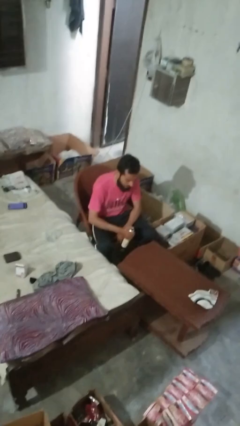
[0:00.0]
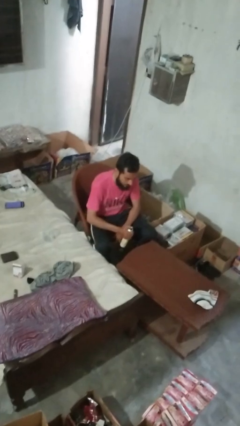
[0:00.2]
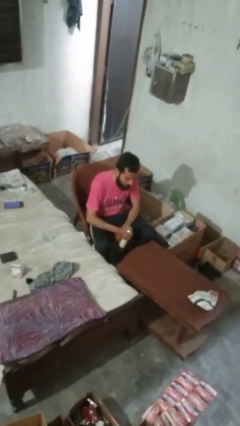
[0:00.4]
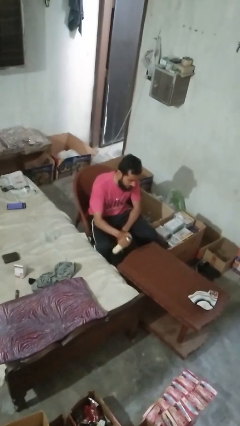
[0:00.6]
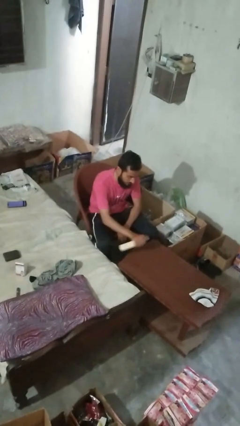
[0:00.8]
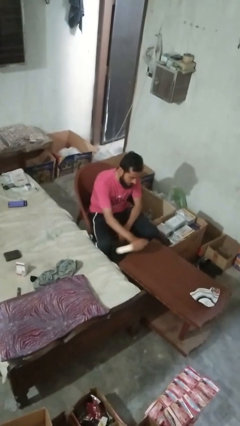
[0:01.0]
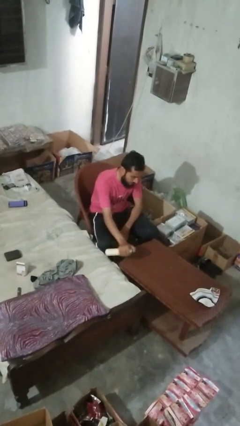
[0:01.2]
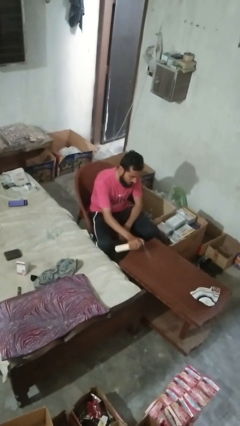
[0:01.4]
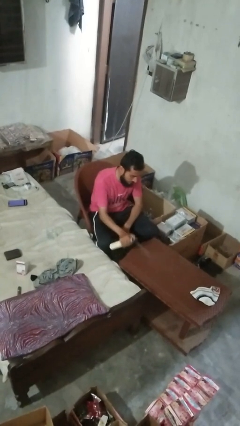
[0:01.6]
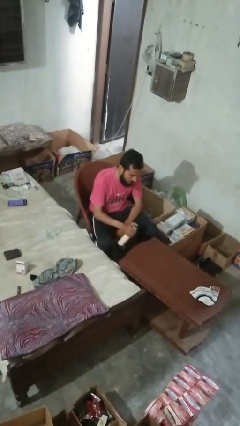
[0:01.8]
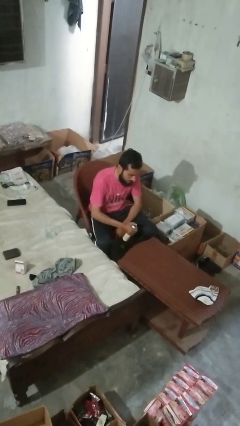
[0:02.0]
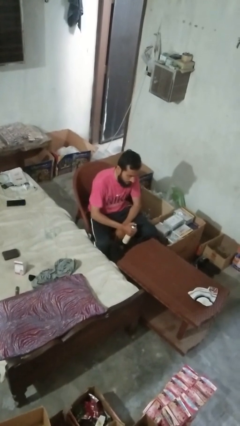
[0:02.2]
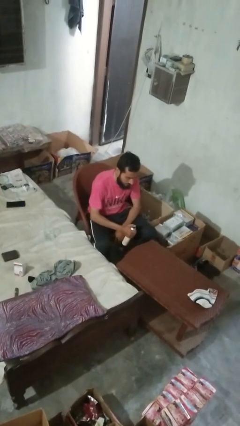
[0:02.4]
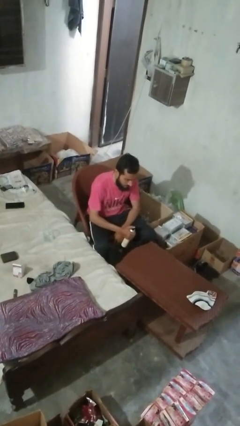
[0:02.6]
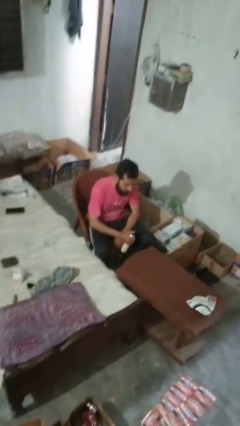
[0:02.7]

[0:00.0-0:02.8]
person sprays from bottle

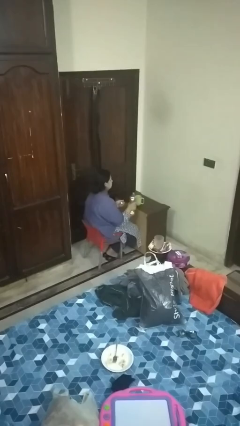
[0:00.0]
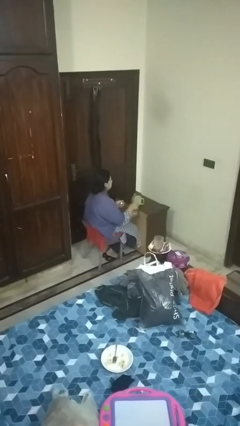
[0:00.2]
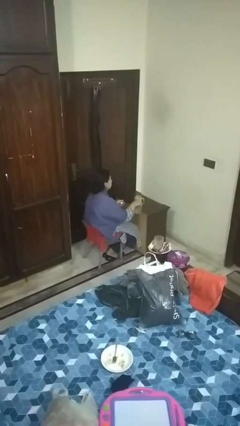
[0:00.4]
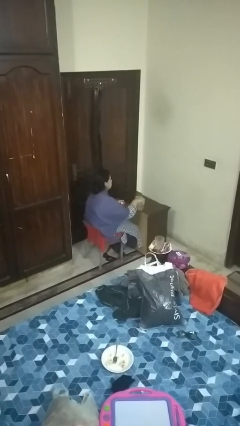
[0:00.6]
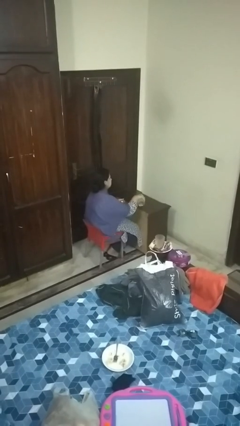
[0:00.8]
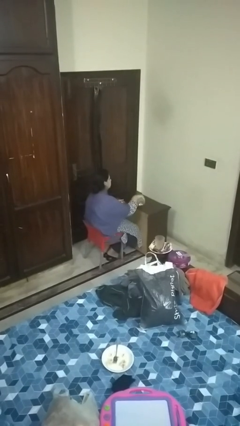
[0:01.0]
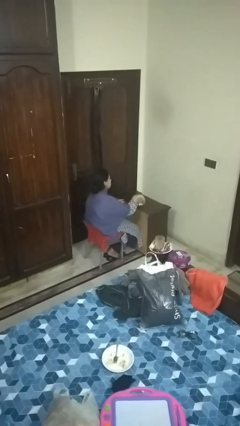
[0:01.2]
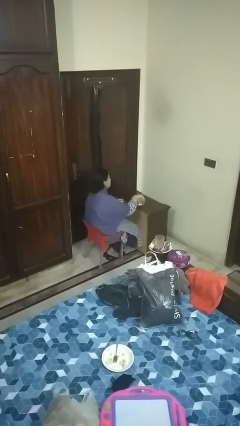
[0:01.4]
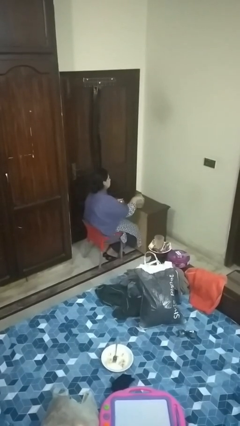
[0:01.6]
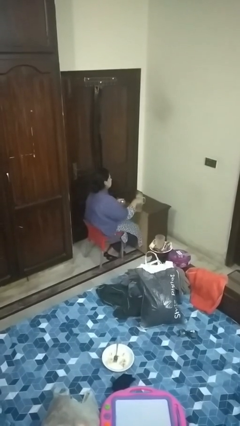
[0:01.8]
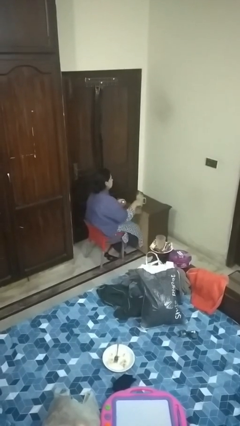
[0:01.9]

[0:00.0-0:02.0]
person pours liquid into cup

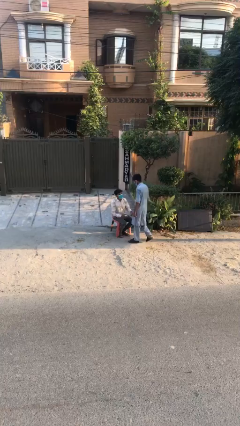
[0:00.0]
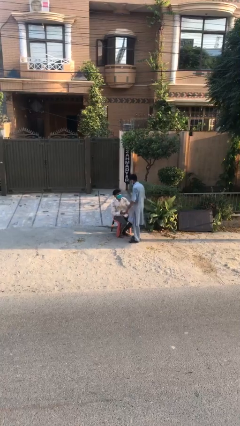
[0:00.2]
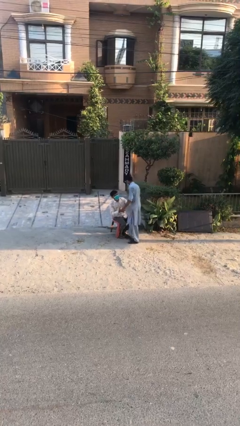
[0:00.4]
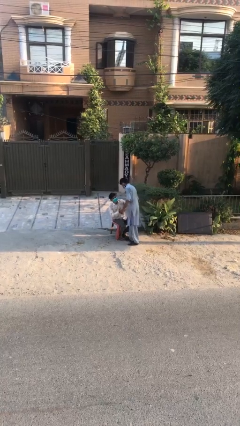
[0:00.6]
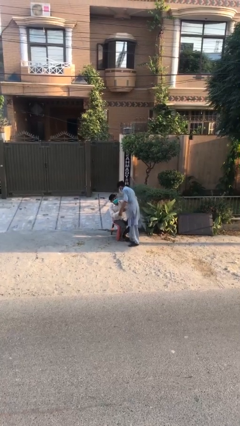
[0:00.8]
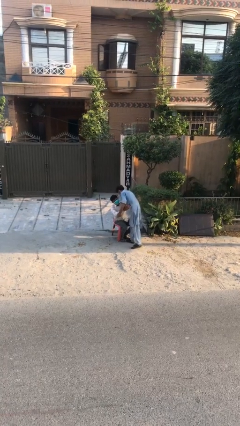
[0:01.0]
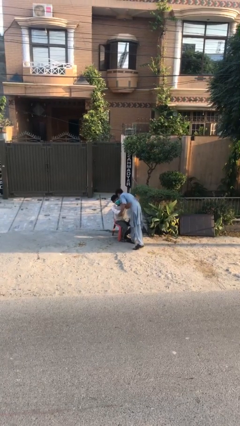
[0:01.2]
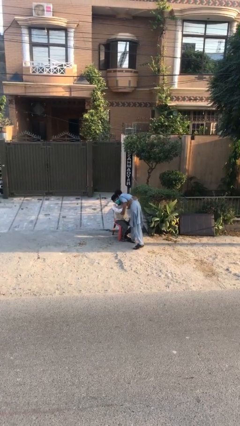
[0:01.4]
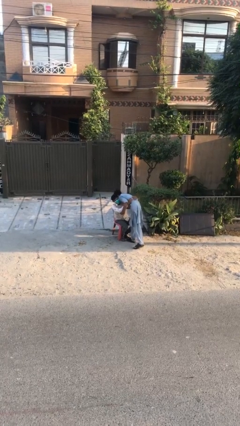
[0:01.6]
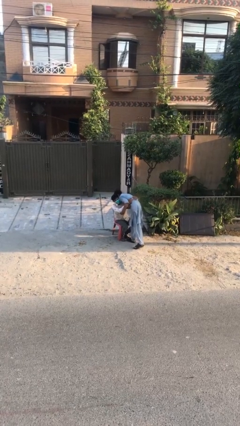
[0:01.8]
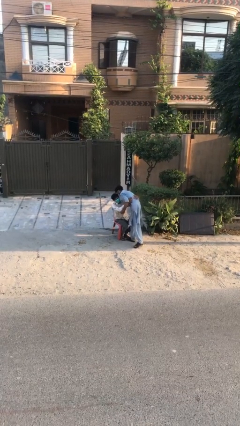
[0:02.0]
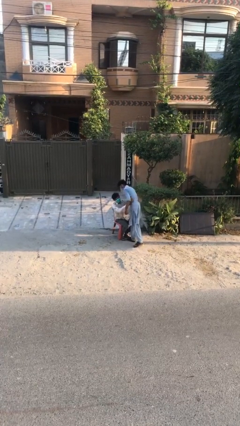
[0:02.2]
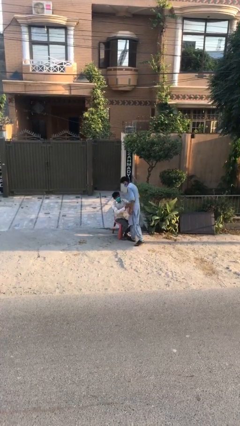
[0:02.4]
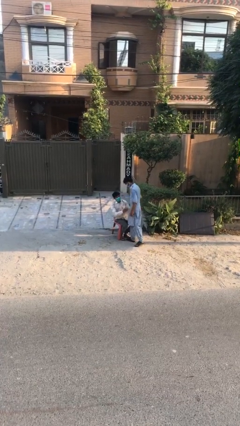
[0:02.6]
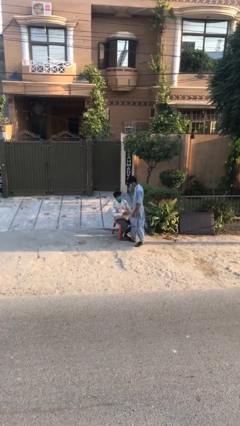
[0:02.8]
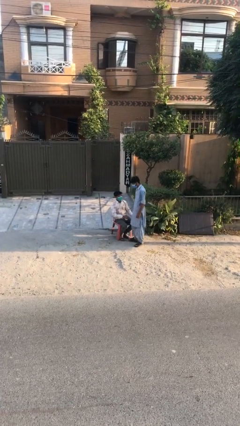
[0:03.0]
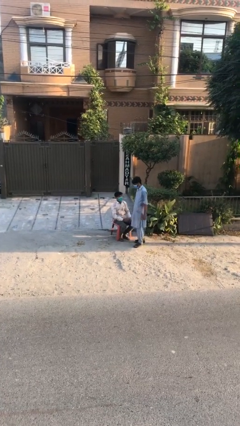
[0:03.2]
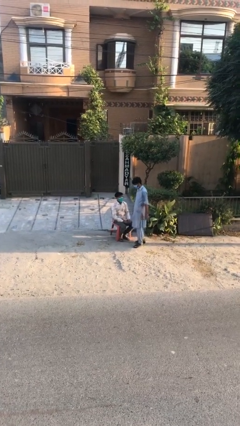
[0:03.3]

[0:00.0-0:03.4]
person embraces person

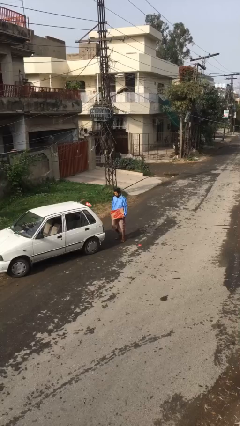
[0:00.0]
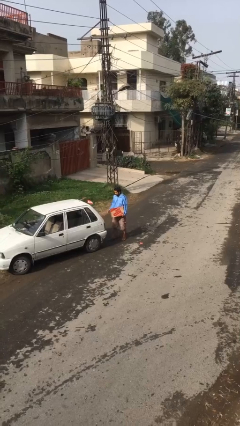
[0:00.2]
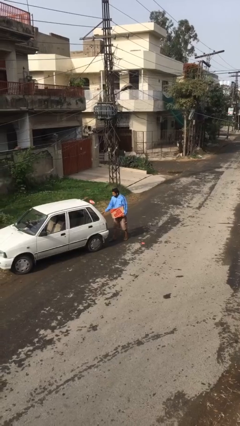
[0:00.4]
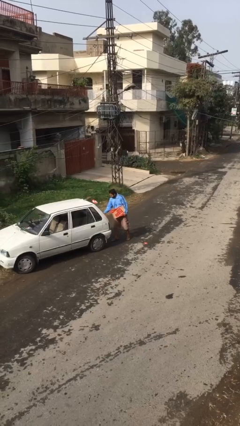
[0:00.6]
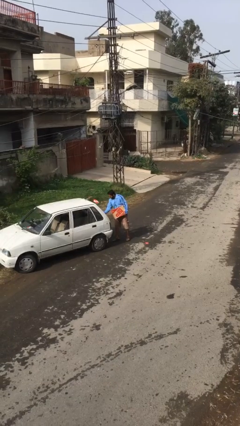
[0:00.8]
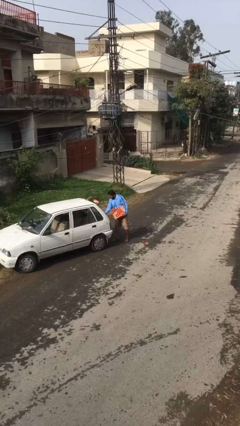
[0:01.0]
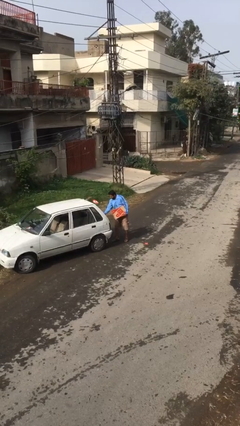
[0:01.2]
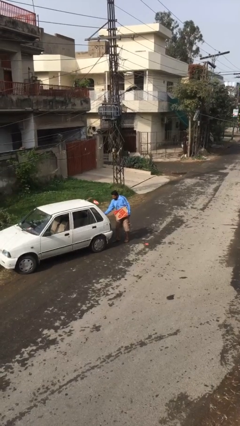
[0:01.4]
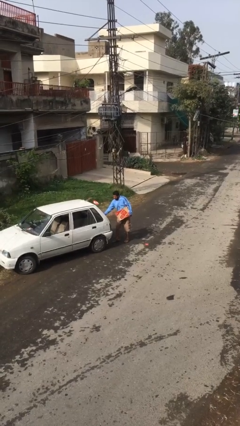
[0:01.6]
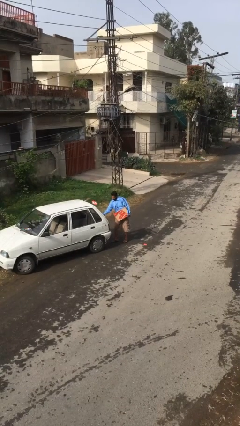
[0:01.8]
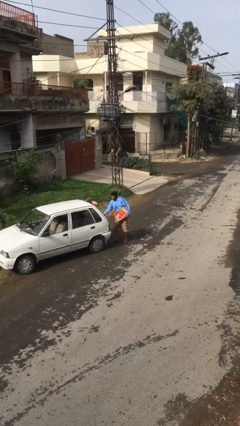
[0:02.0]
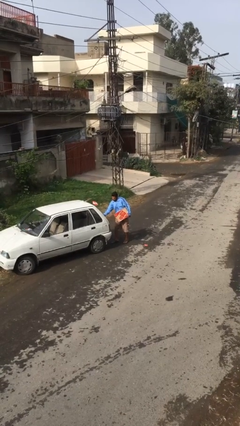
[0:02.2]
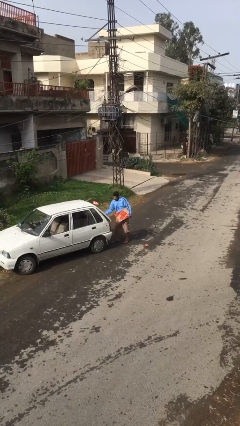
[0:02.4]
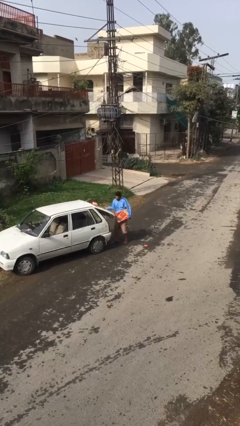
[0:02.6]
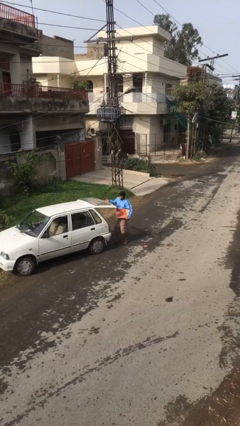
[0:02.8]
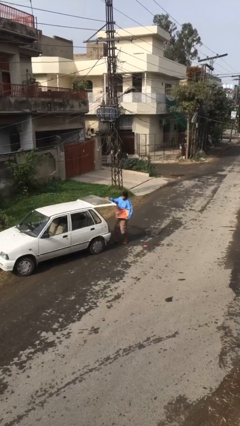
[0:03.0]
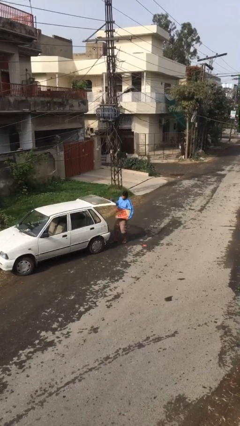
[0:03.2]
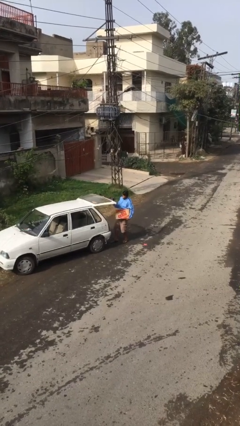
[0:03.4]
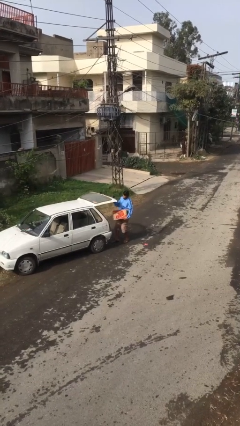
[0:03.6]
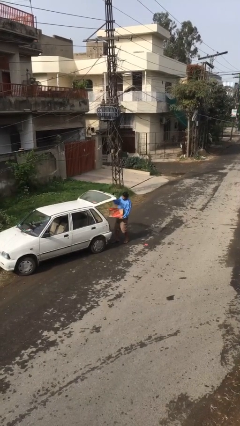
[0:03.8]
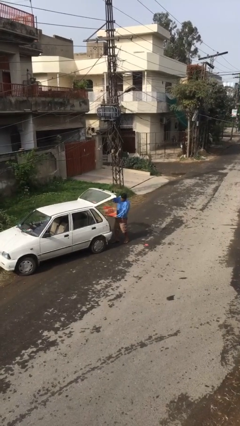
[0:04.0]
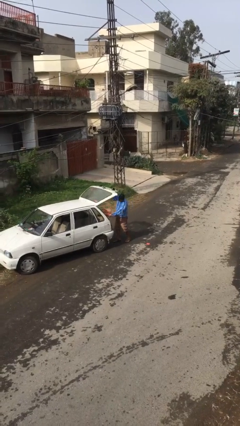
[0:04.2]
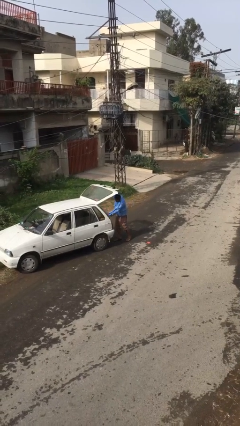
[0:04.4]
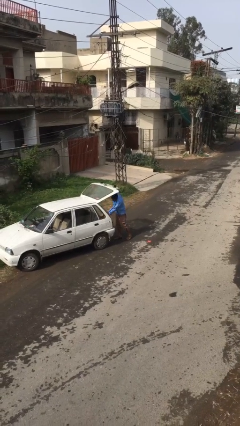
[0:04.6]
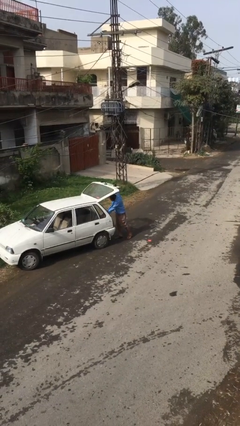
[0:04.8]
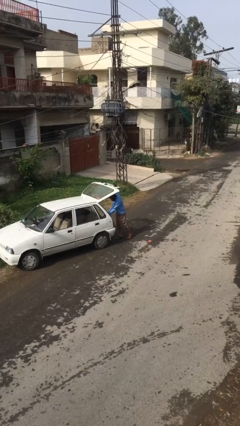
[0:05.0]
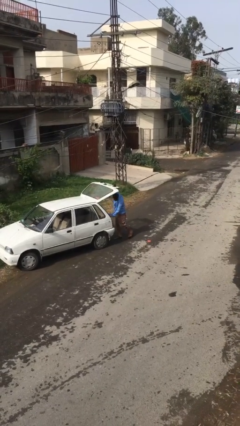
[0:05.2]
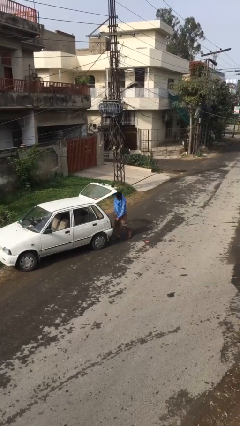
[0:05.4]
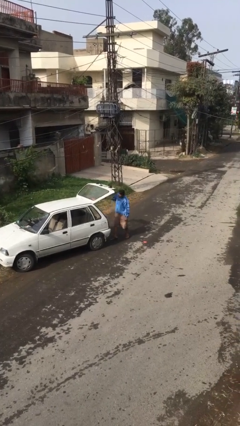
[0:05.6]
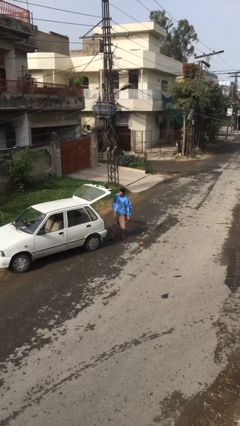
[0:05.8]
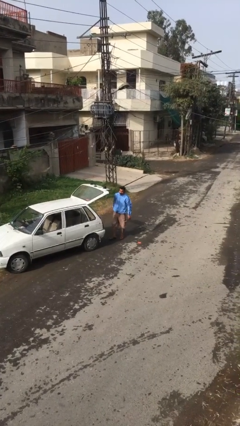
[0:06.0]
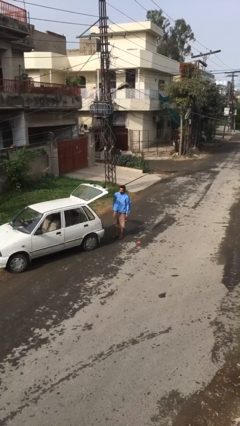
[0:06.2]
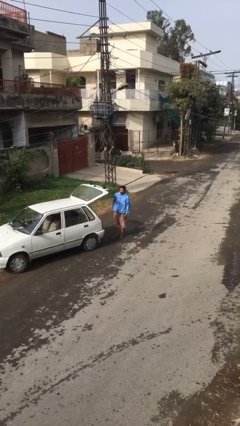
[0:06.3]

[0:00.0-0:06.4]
person loads car

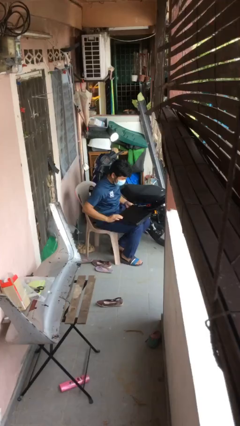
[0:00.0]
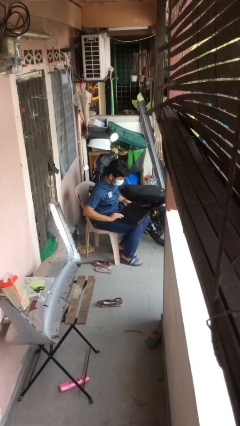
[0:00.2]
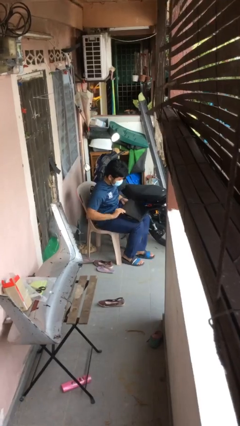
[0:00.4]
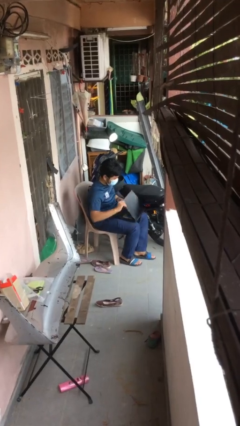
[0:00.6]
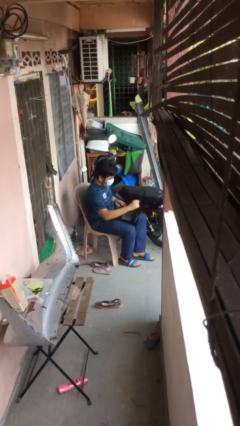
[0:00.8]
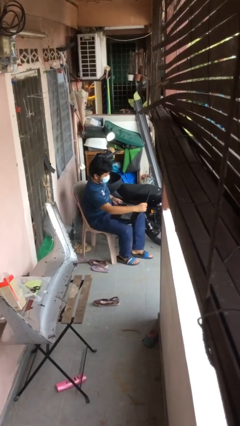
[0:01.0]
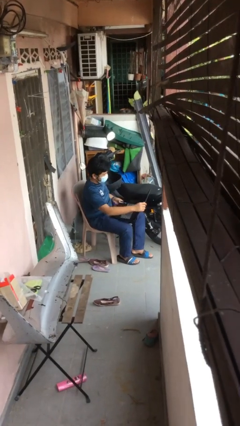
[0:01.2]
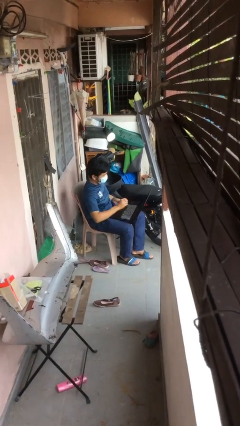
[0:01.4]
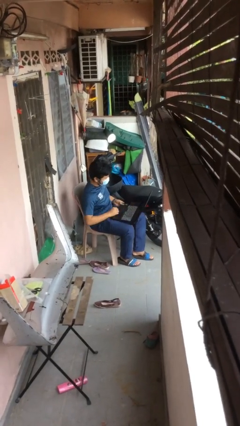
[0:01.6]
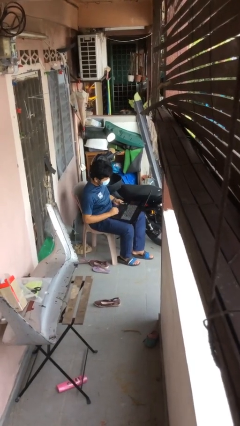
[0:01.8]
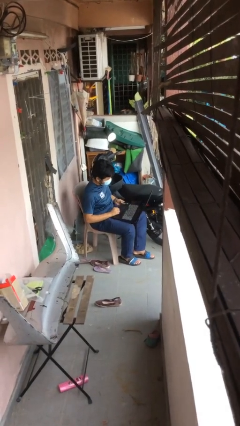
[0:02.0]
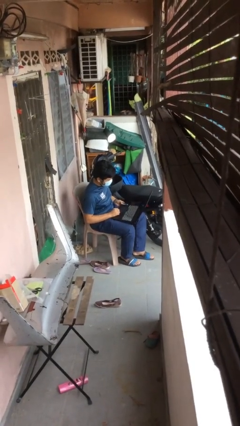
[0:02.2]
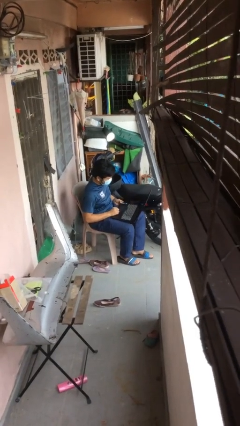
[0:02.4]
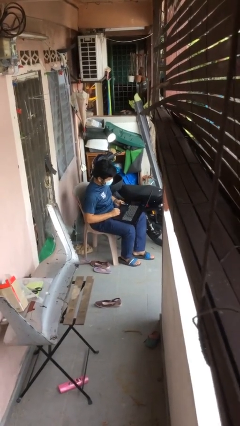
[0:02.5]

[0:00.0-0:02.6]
person opens laptop

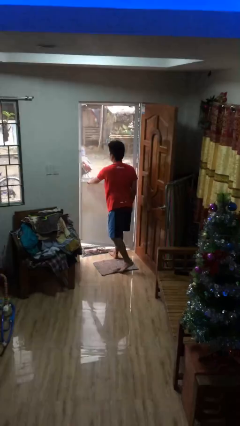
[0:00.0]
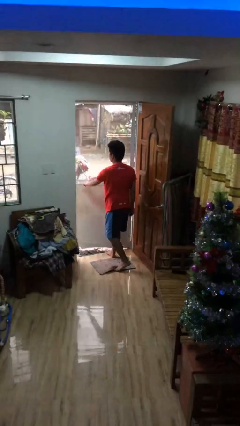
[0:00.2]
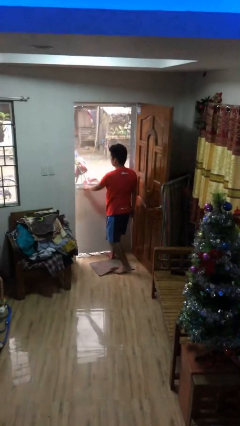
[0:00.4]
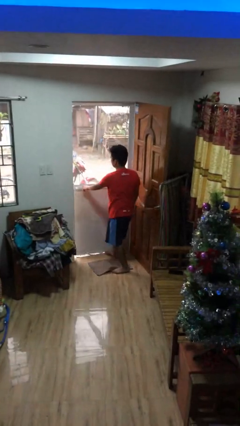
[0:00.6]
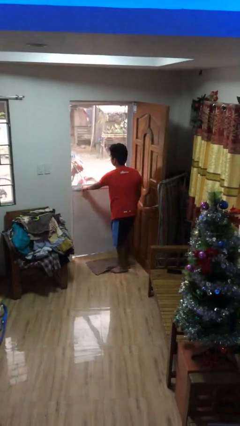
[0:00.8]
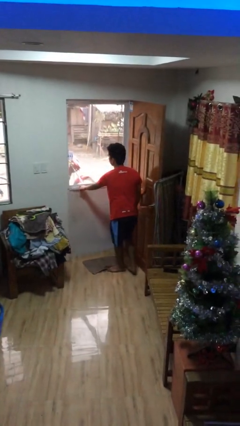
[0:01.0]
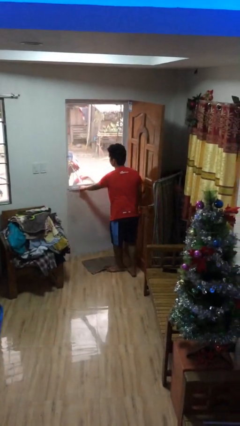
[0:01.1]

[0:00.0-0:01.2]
person closes facility door
